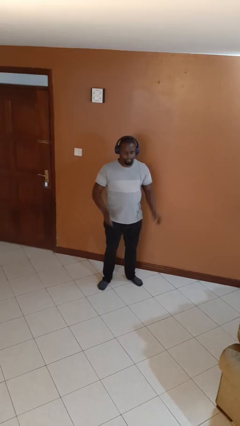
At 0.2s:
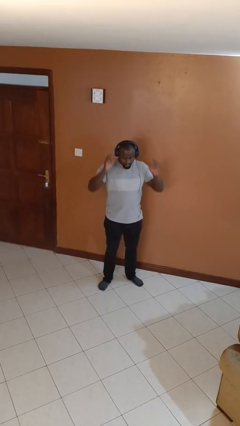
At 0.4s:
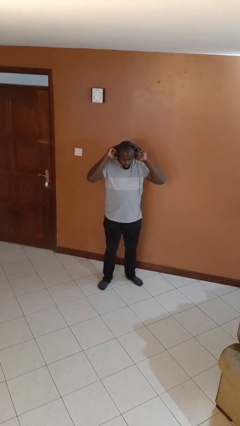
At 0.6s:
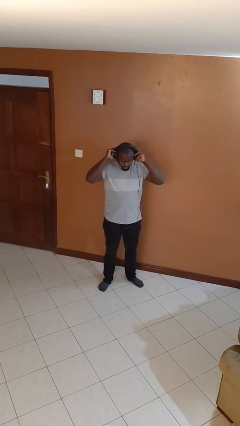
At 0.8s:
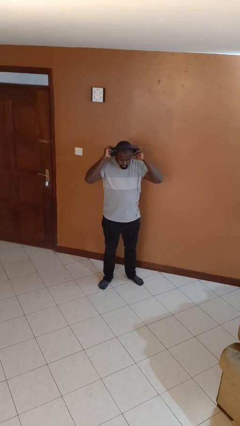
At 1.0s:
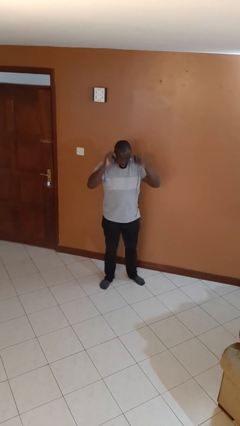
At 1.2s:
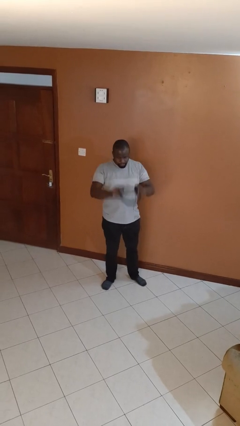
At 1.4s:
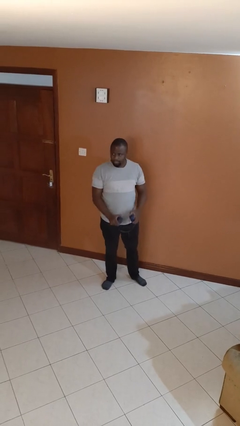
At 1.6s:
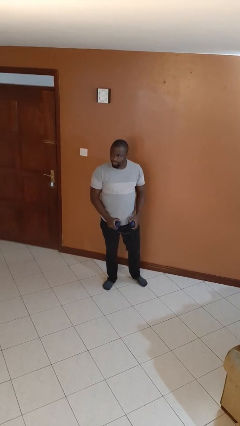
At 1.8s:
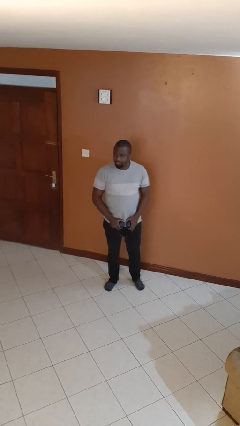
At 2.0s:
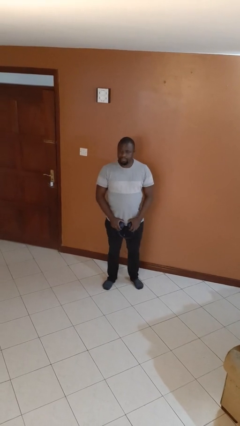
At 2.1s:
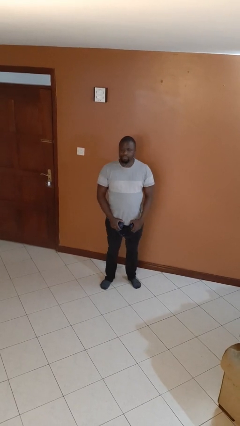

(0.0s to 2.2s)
person takes off headphones

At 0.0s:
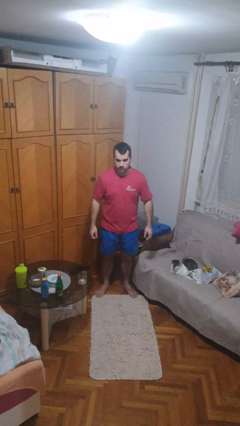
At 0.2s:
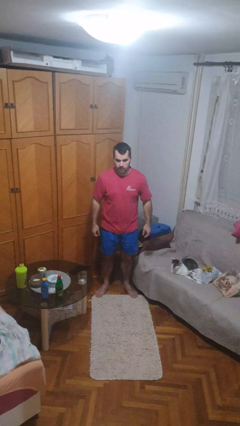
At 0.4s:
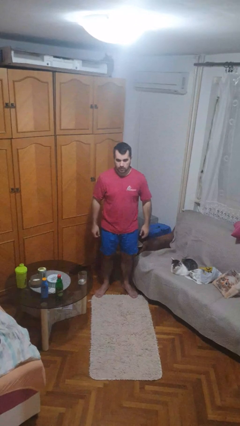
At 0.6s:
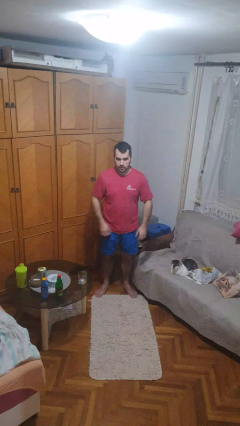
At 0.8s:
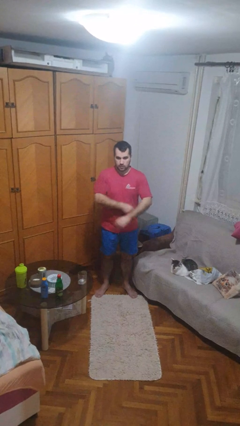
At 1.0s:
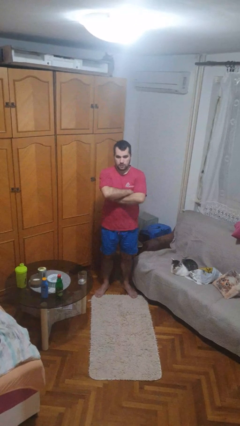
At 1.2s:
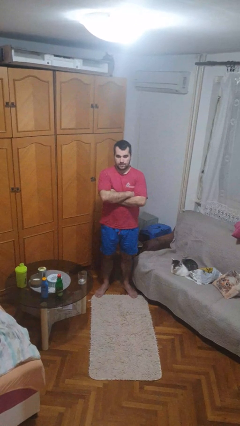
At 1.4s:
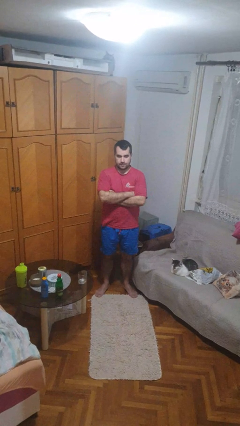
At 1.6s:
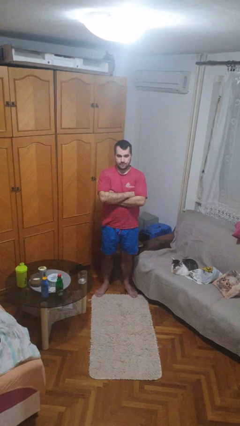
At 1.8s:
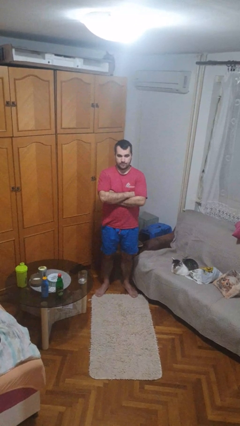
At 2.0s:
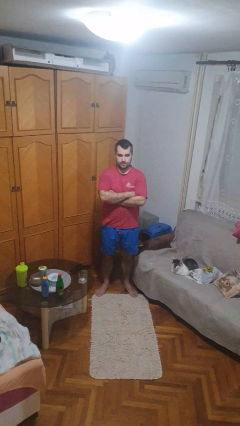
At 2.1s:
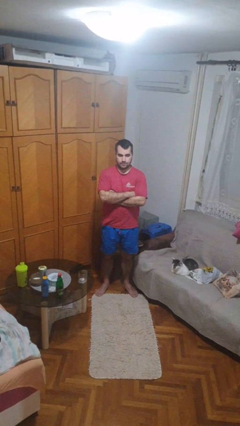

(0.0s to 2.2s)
person crosses arms

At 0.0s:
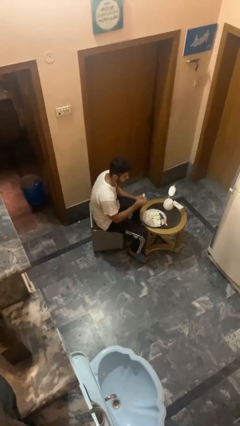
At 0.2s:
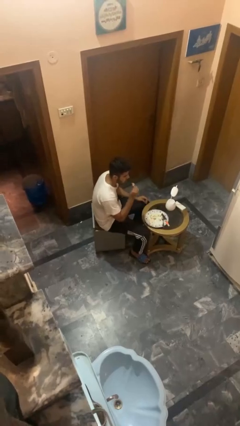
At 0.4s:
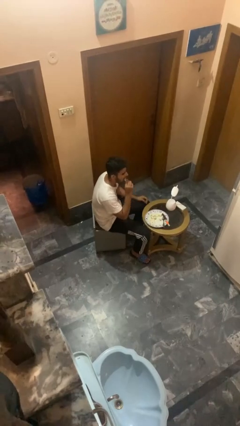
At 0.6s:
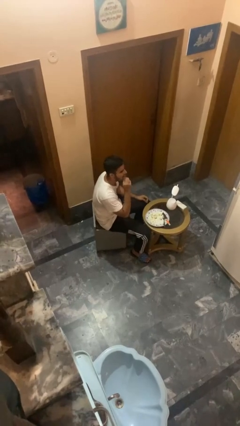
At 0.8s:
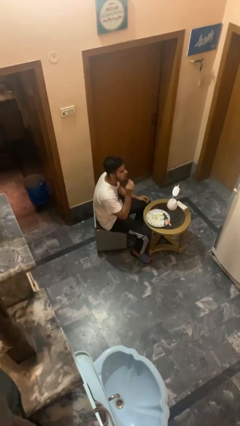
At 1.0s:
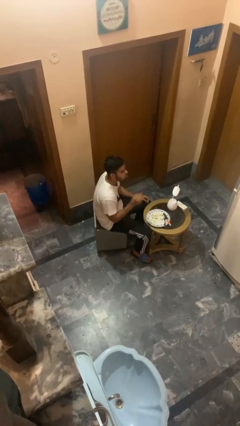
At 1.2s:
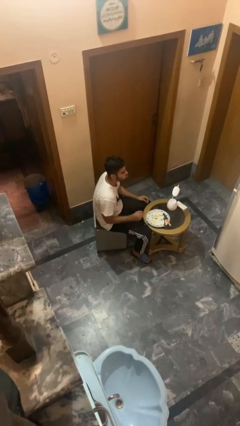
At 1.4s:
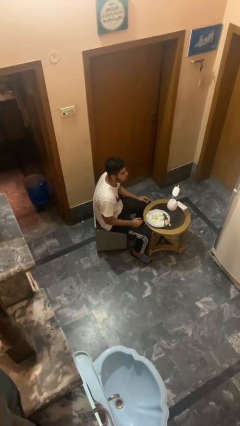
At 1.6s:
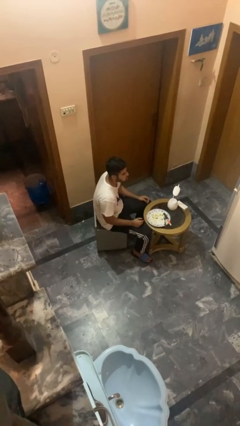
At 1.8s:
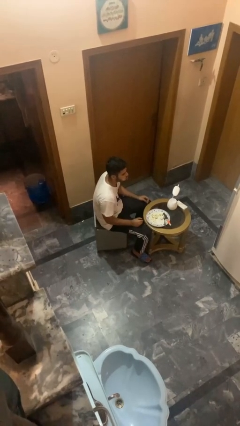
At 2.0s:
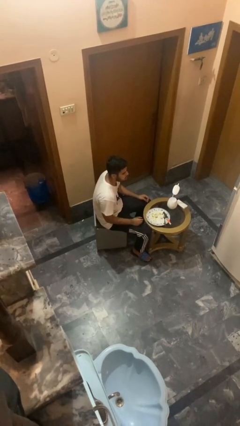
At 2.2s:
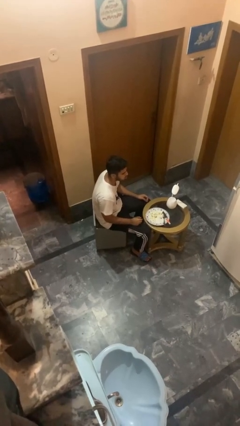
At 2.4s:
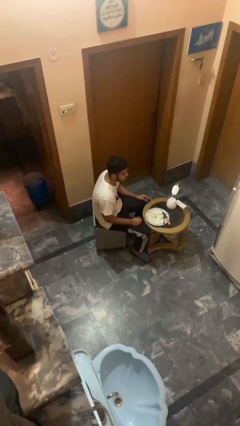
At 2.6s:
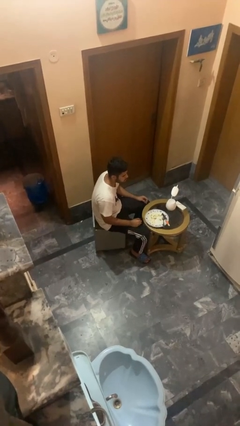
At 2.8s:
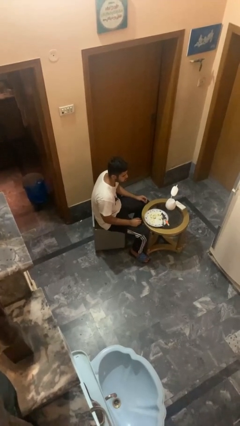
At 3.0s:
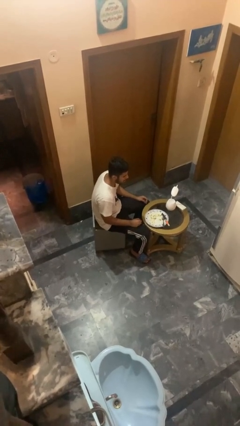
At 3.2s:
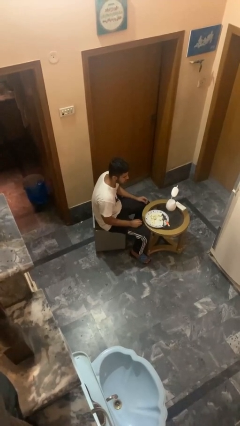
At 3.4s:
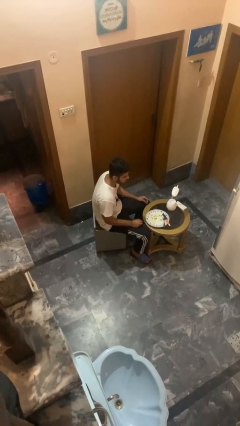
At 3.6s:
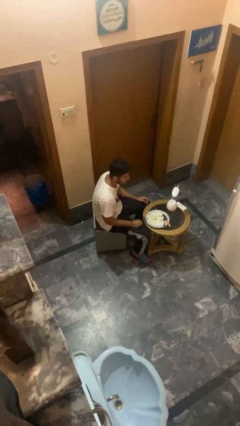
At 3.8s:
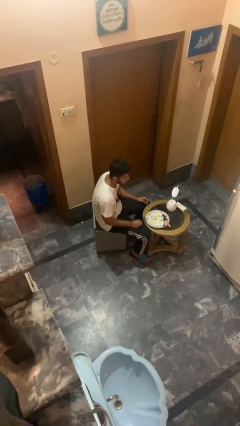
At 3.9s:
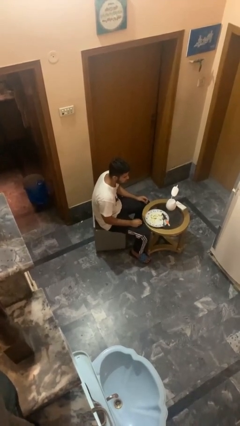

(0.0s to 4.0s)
person eats with hands

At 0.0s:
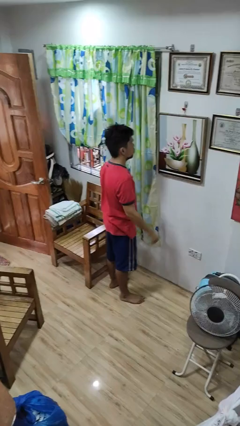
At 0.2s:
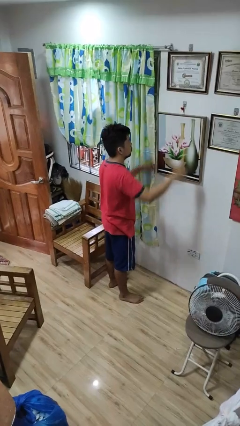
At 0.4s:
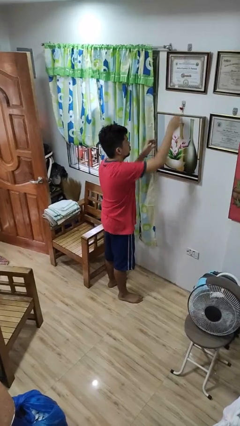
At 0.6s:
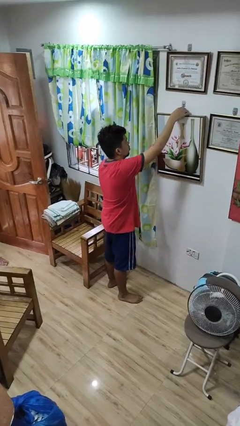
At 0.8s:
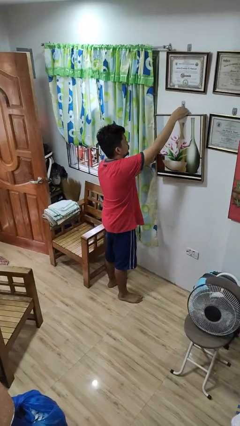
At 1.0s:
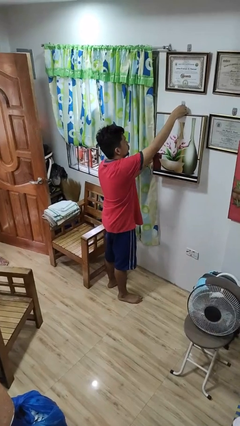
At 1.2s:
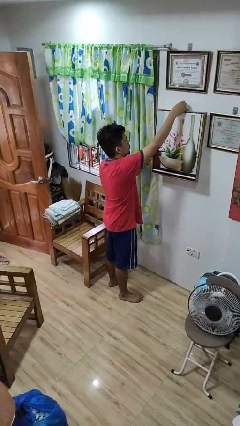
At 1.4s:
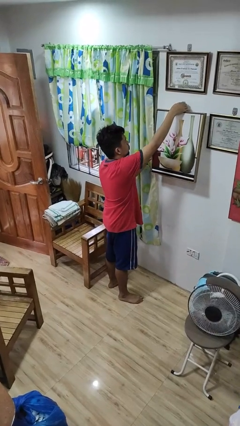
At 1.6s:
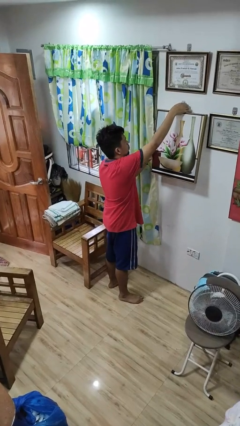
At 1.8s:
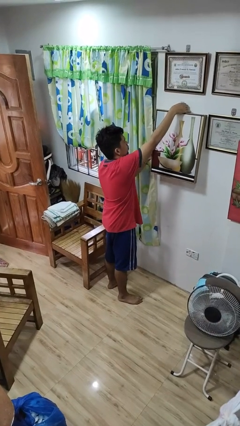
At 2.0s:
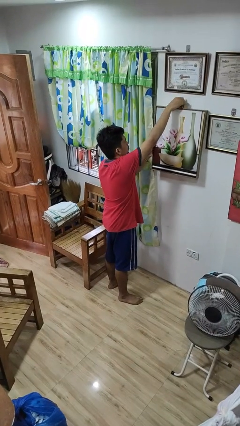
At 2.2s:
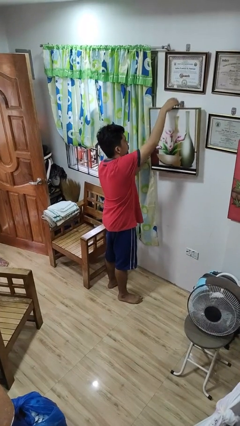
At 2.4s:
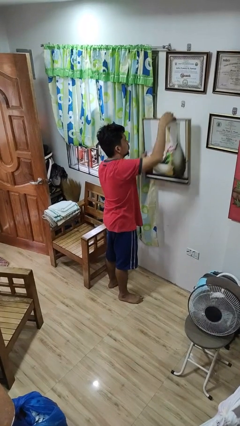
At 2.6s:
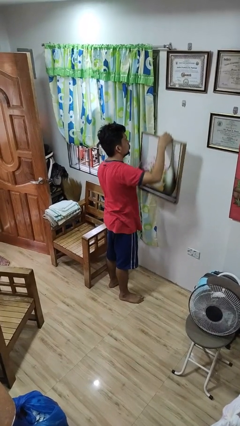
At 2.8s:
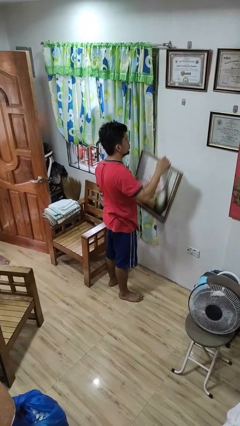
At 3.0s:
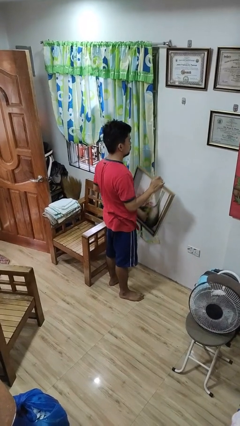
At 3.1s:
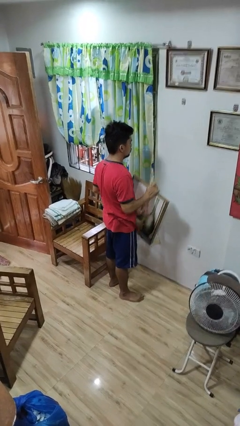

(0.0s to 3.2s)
person takes down picture frame

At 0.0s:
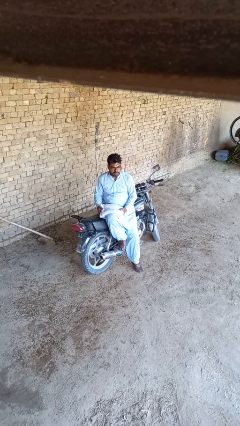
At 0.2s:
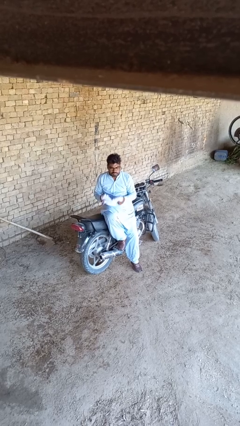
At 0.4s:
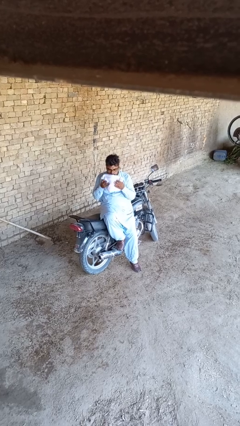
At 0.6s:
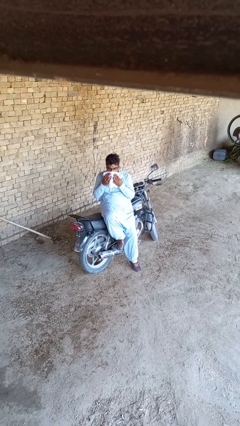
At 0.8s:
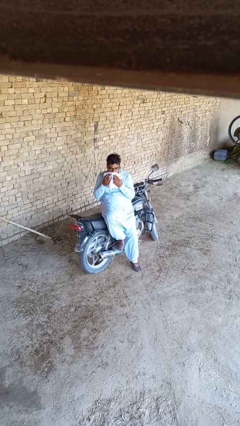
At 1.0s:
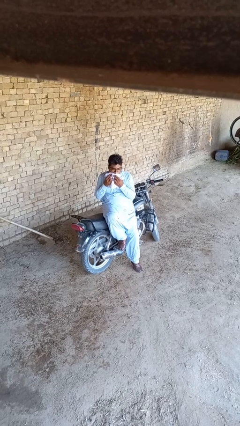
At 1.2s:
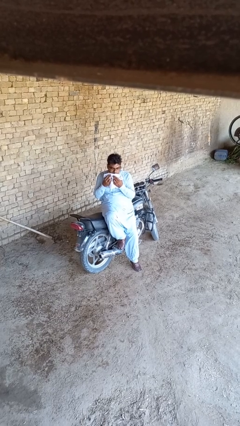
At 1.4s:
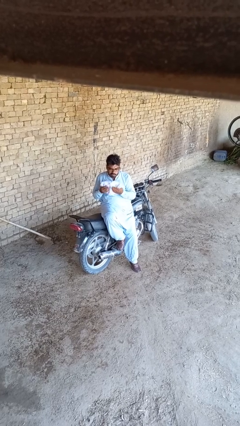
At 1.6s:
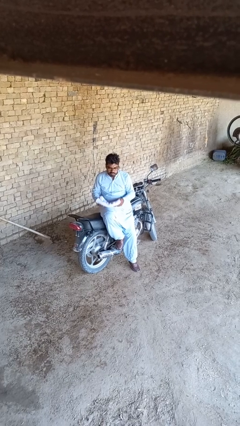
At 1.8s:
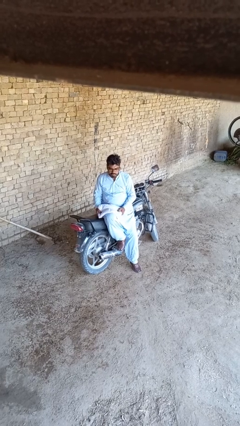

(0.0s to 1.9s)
person wipes mouth with napkin

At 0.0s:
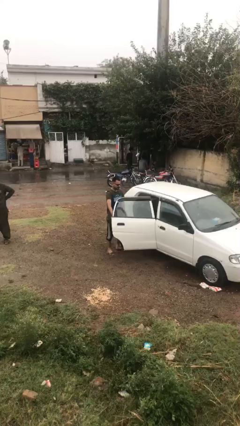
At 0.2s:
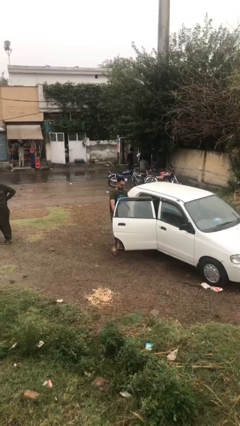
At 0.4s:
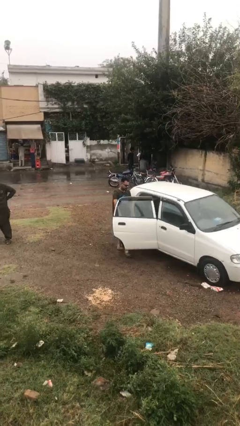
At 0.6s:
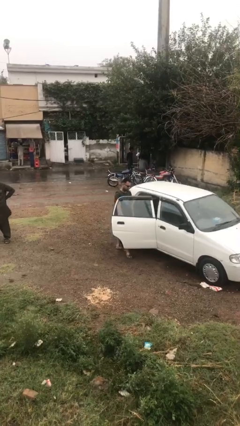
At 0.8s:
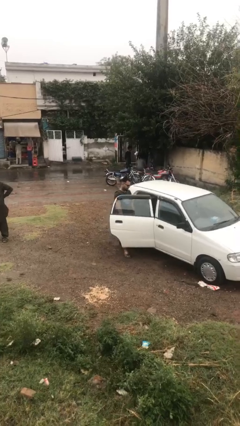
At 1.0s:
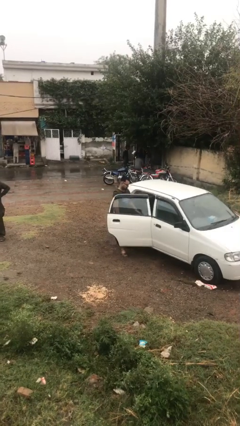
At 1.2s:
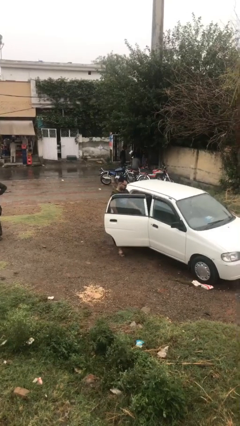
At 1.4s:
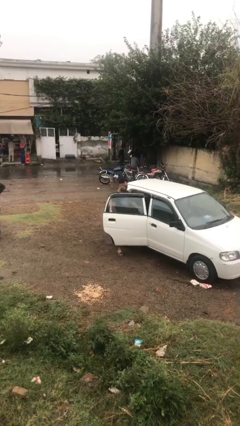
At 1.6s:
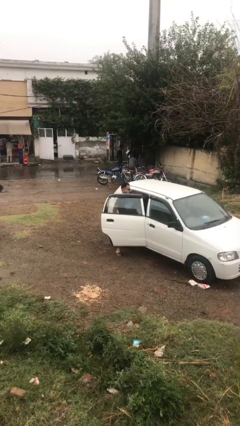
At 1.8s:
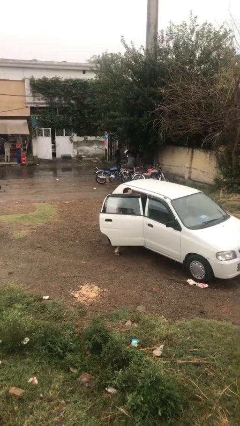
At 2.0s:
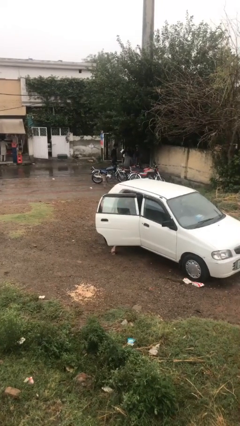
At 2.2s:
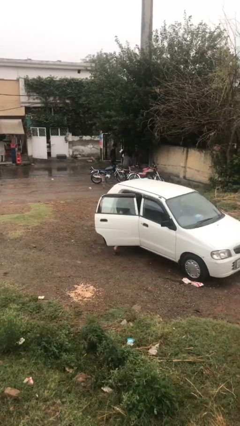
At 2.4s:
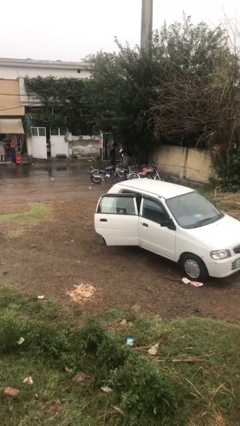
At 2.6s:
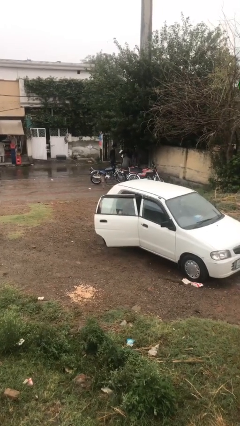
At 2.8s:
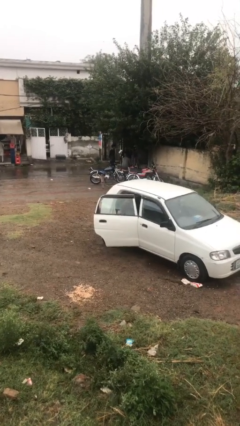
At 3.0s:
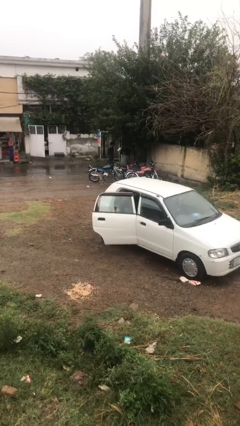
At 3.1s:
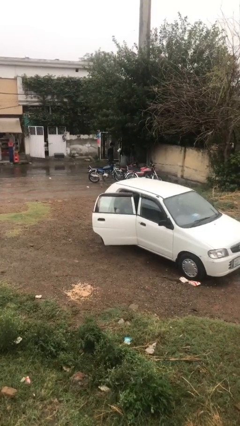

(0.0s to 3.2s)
person enters car

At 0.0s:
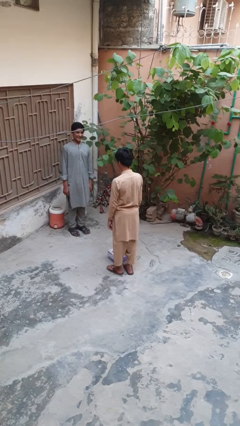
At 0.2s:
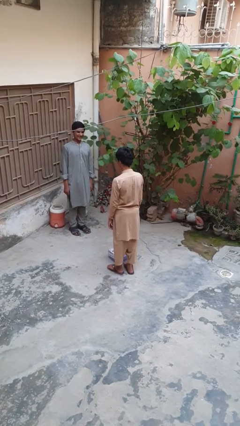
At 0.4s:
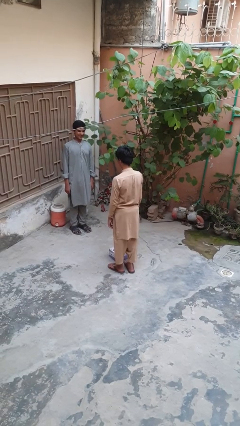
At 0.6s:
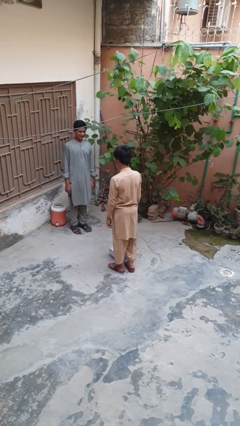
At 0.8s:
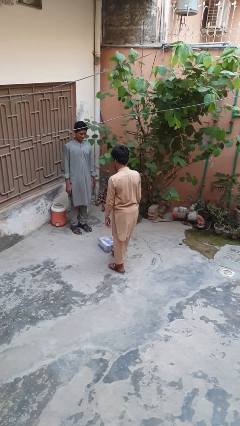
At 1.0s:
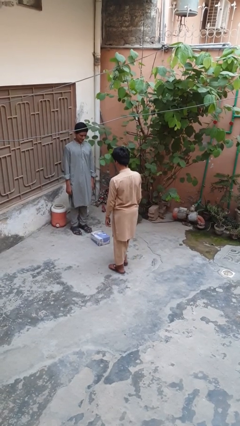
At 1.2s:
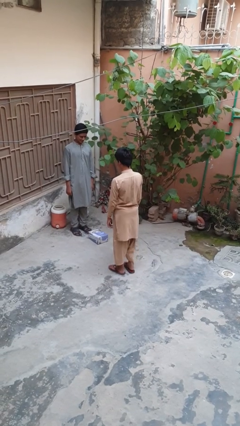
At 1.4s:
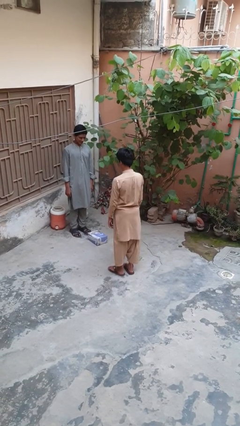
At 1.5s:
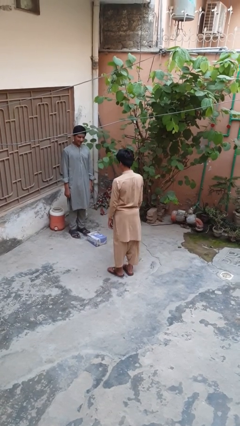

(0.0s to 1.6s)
person kicks object to person
